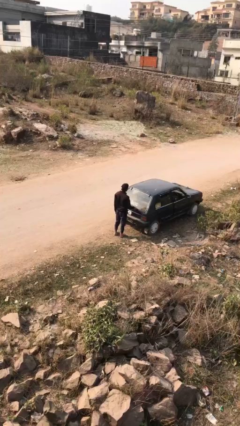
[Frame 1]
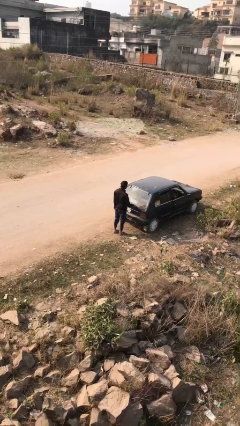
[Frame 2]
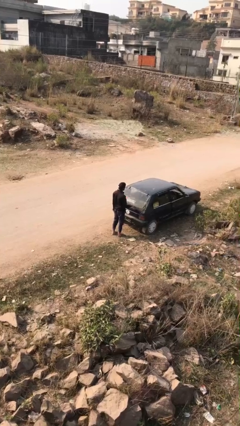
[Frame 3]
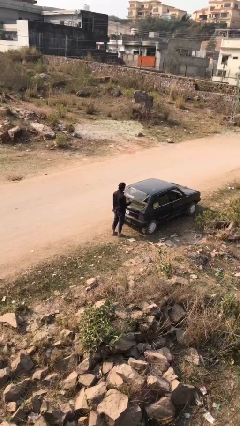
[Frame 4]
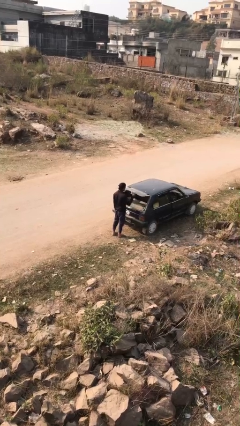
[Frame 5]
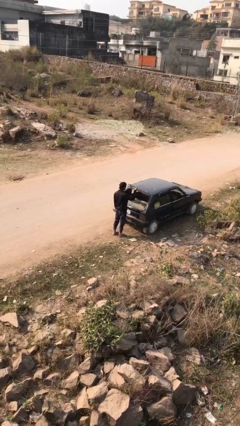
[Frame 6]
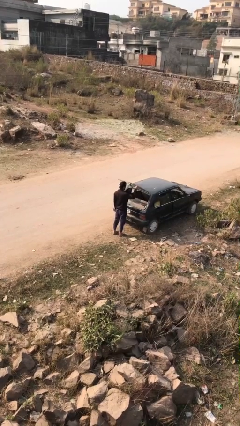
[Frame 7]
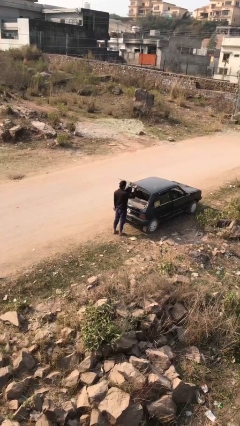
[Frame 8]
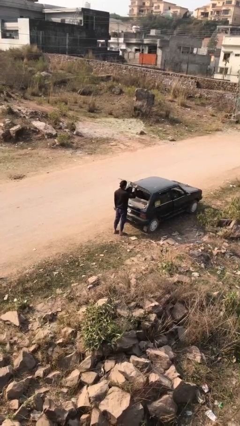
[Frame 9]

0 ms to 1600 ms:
person opens car trunk

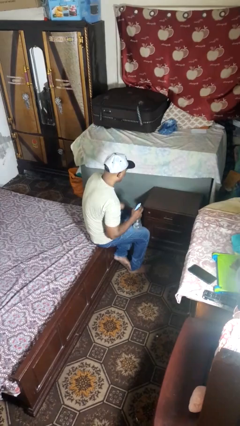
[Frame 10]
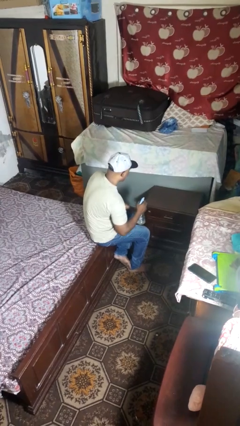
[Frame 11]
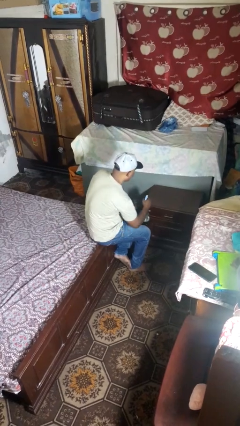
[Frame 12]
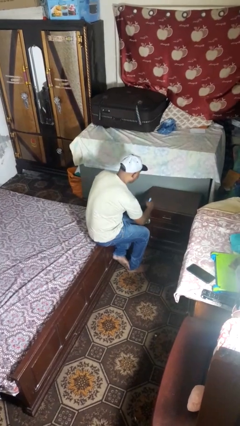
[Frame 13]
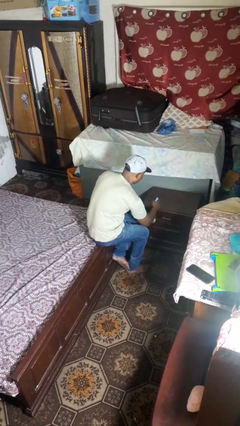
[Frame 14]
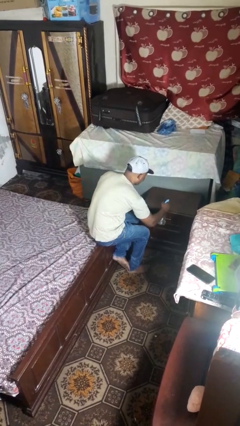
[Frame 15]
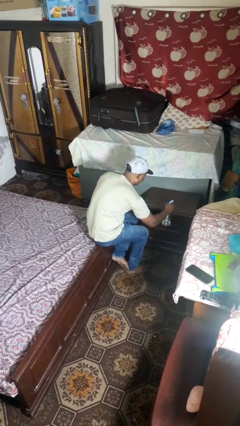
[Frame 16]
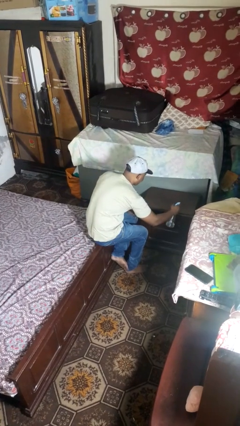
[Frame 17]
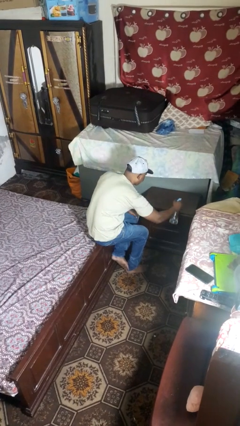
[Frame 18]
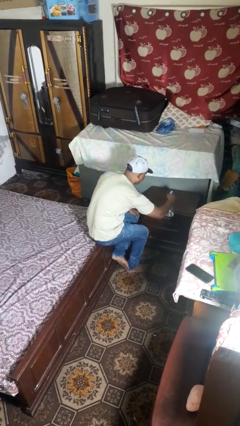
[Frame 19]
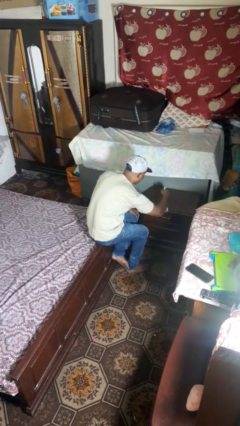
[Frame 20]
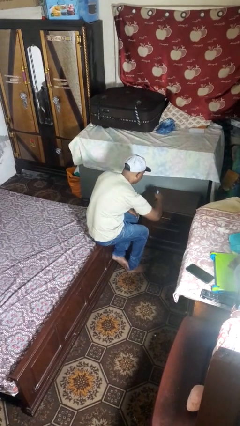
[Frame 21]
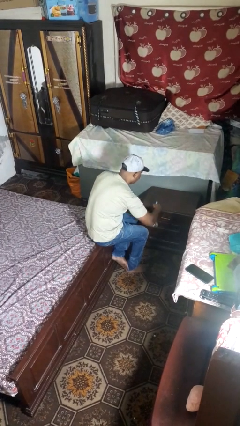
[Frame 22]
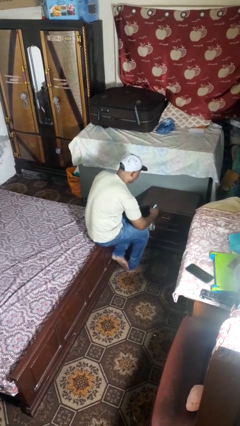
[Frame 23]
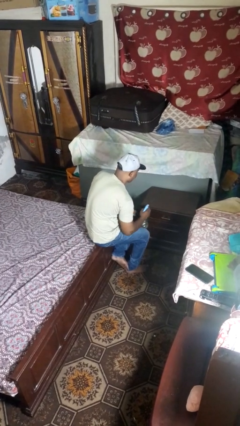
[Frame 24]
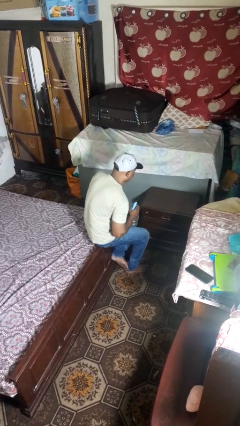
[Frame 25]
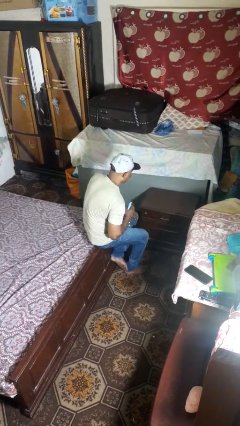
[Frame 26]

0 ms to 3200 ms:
person sprays from bottle

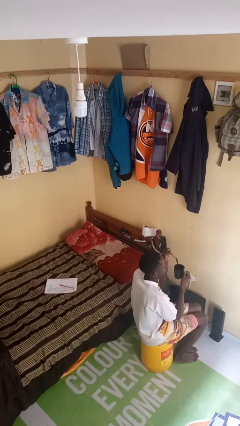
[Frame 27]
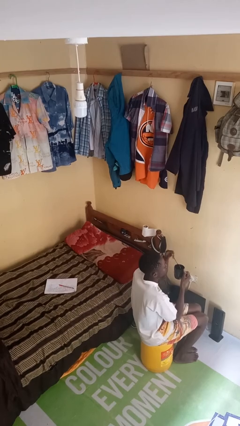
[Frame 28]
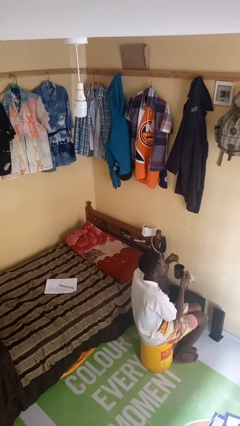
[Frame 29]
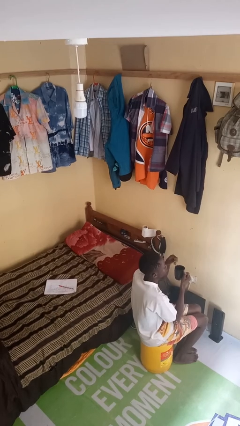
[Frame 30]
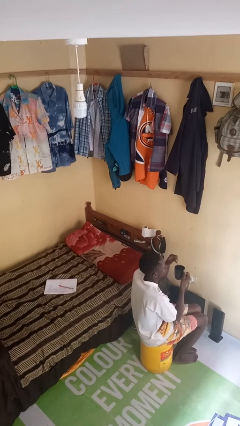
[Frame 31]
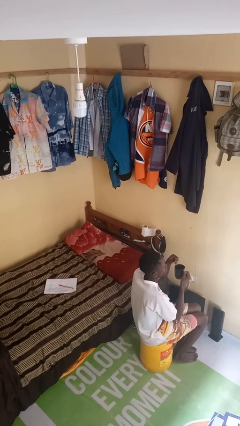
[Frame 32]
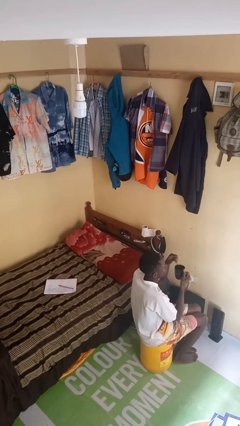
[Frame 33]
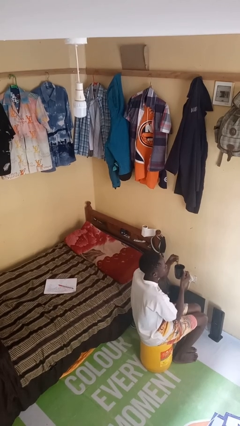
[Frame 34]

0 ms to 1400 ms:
person stirs mug

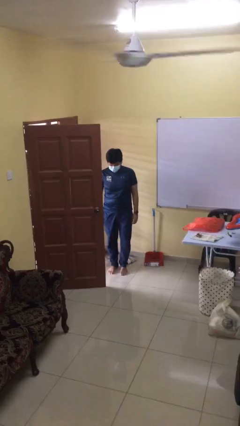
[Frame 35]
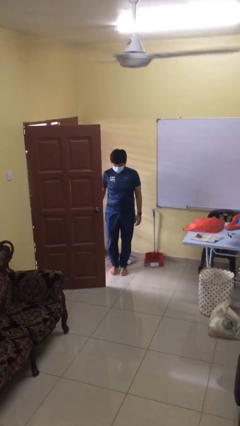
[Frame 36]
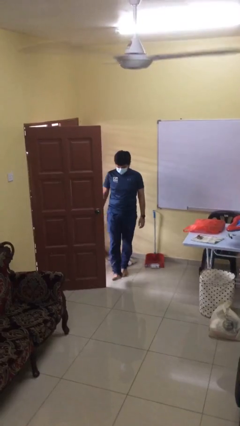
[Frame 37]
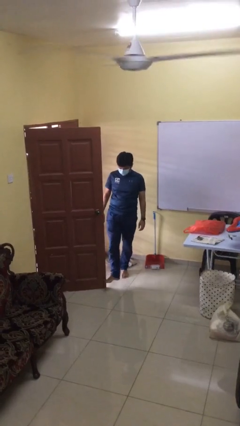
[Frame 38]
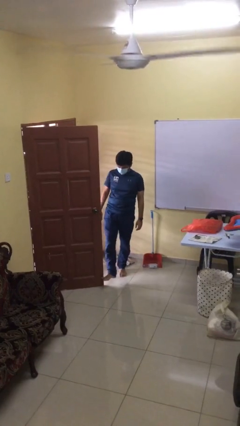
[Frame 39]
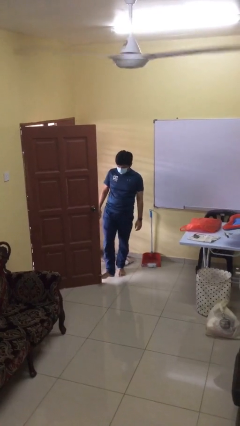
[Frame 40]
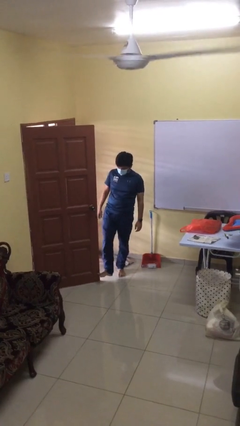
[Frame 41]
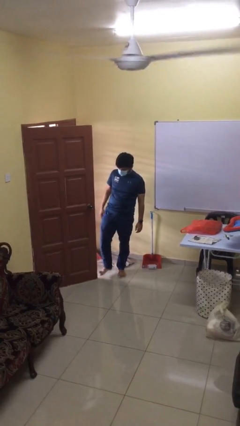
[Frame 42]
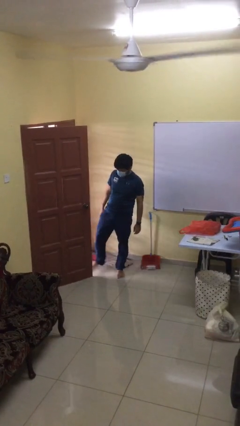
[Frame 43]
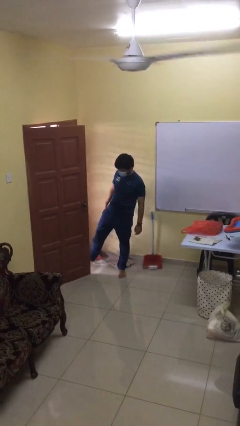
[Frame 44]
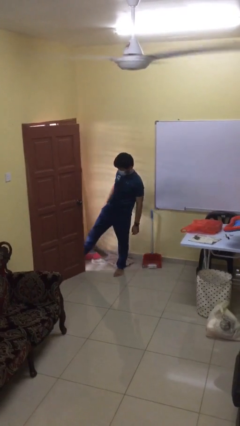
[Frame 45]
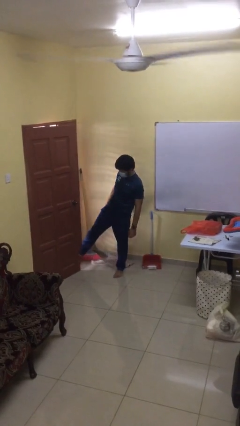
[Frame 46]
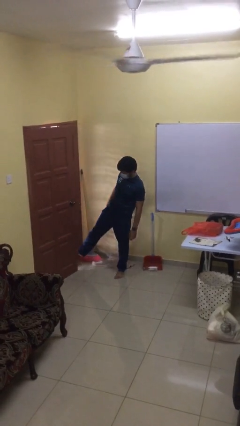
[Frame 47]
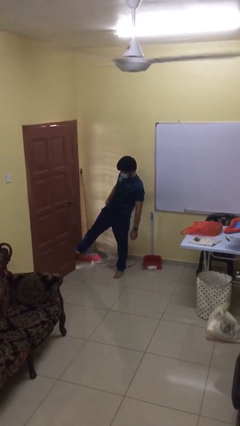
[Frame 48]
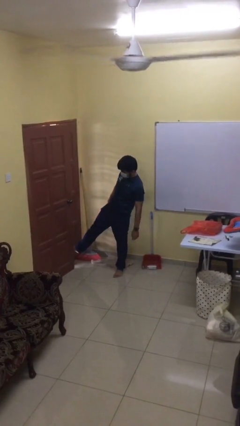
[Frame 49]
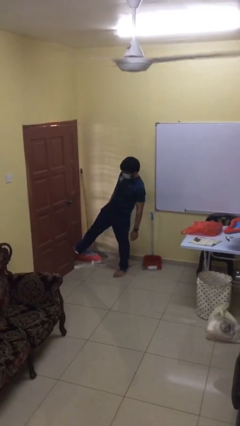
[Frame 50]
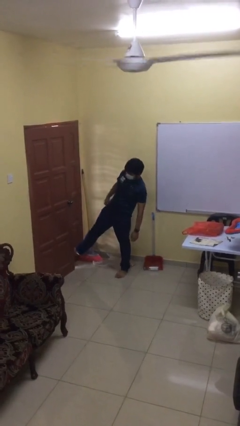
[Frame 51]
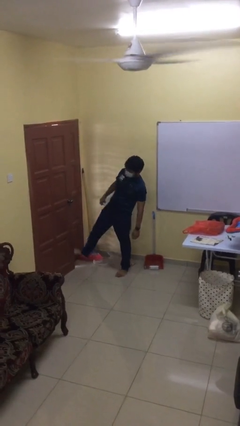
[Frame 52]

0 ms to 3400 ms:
person closes door with foot

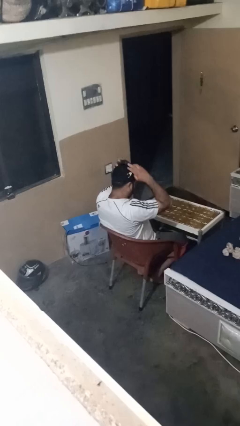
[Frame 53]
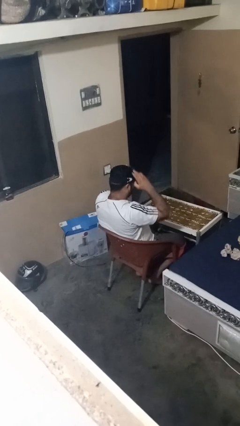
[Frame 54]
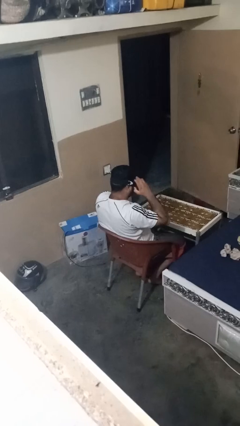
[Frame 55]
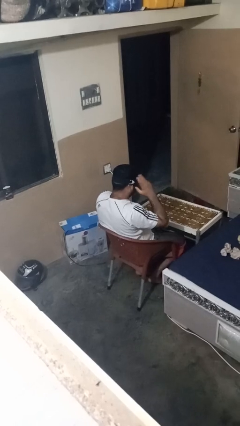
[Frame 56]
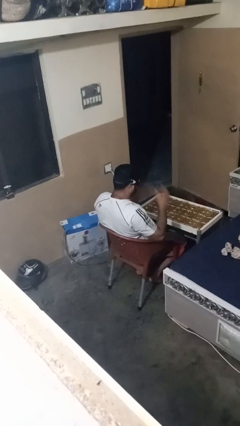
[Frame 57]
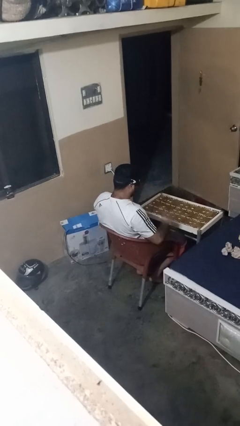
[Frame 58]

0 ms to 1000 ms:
person puts on sunglasses

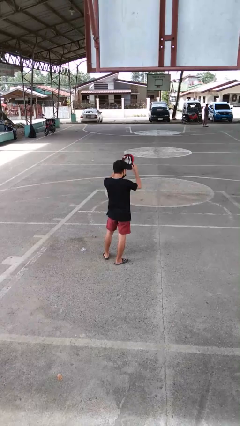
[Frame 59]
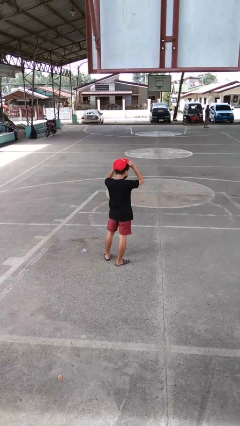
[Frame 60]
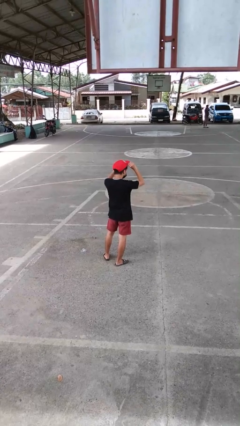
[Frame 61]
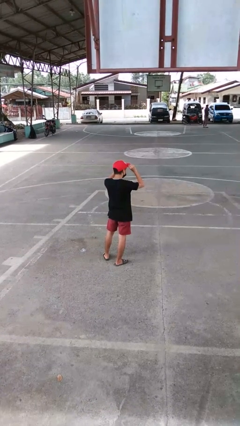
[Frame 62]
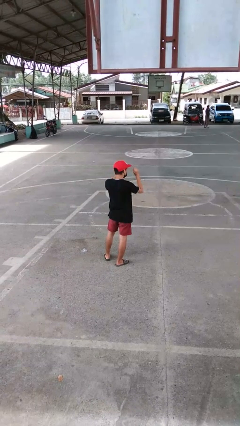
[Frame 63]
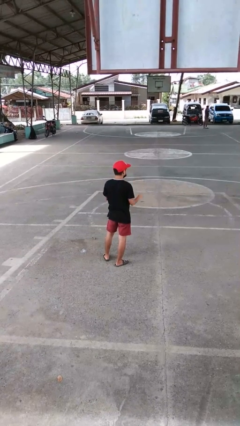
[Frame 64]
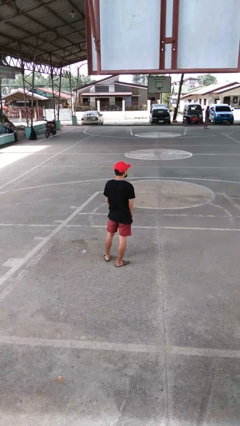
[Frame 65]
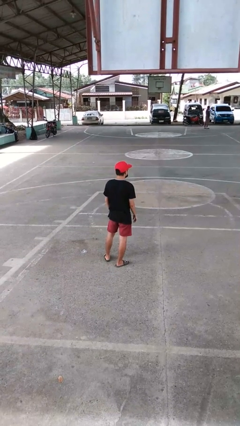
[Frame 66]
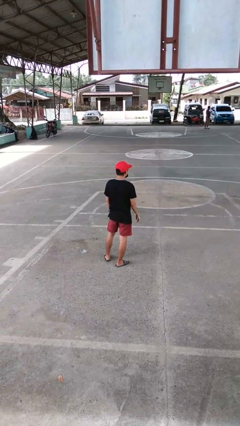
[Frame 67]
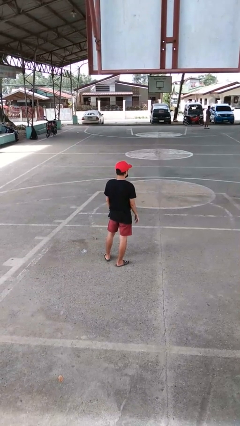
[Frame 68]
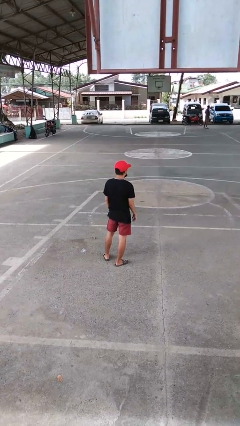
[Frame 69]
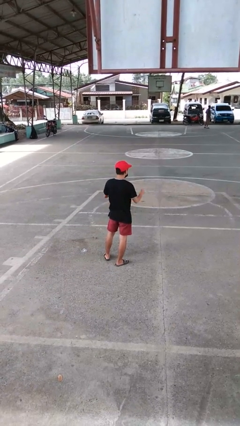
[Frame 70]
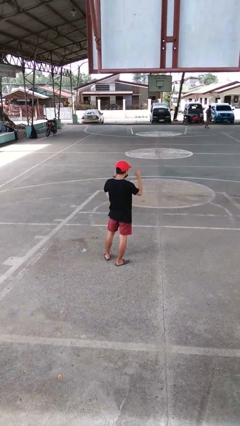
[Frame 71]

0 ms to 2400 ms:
person puts on hat

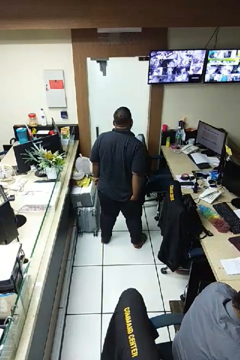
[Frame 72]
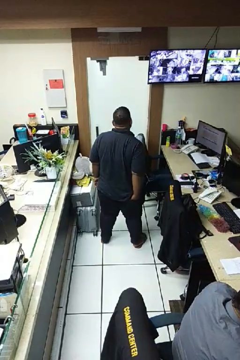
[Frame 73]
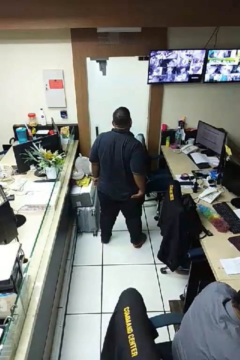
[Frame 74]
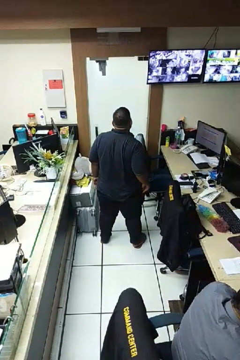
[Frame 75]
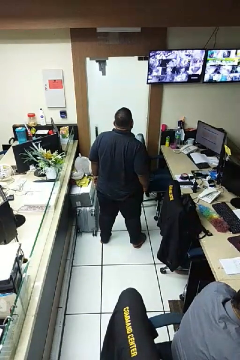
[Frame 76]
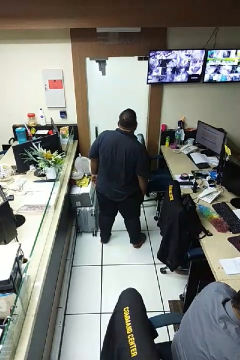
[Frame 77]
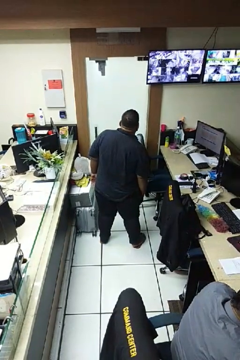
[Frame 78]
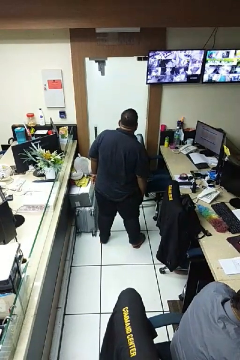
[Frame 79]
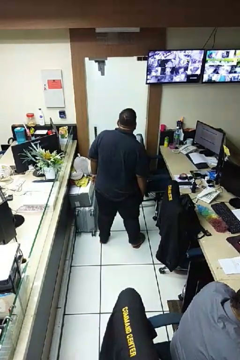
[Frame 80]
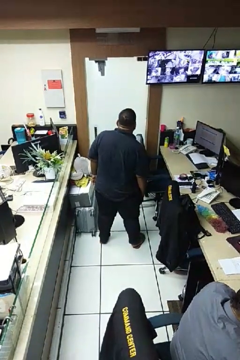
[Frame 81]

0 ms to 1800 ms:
person puts hands in back pockets

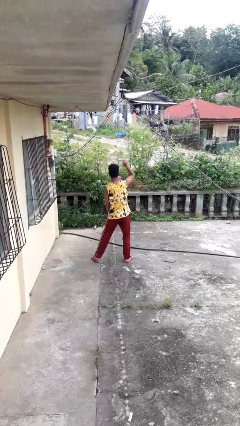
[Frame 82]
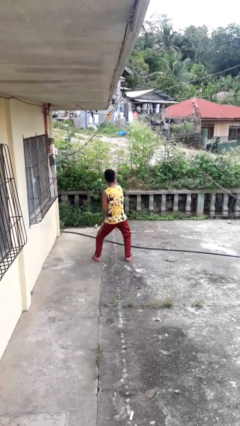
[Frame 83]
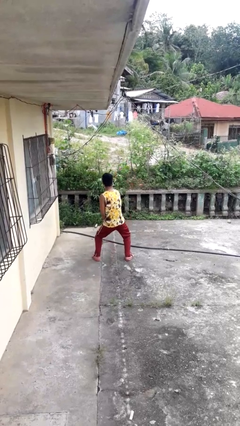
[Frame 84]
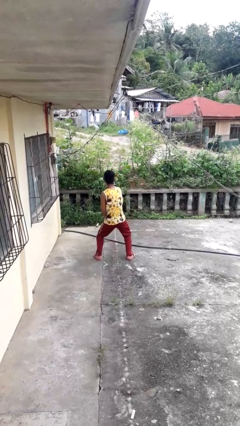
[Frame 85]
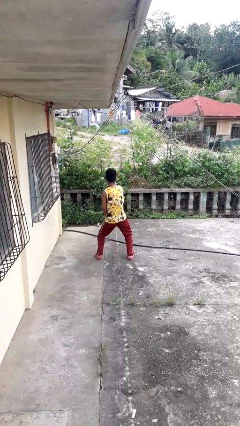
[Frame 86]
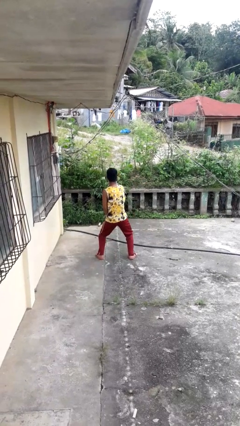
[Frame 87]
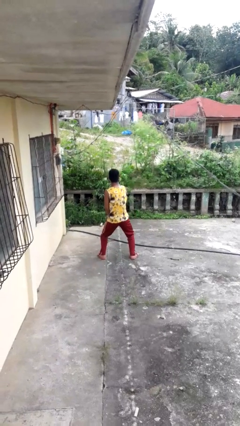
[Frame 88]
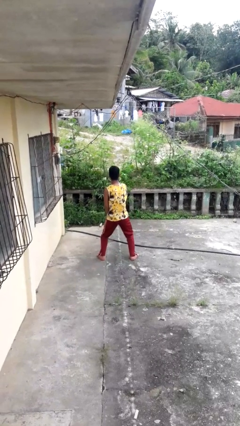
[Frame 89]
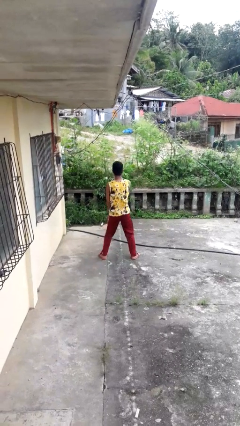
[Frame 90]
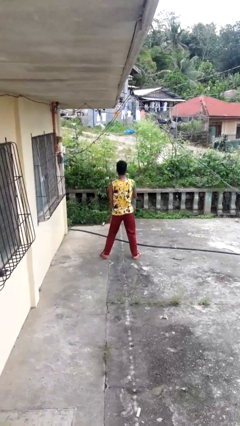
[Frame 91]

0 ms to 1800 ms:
person karate chop

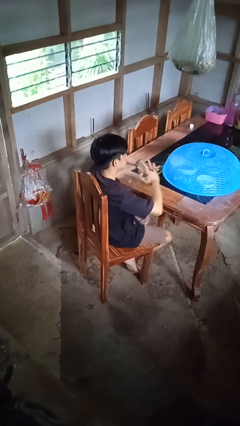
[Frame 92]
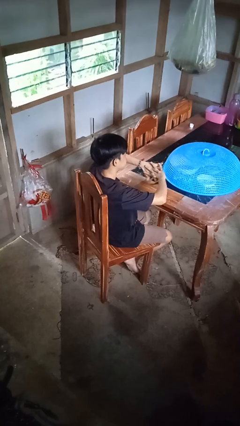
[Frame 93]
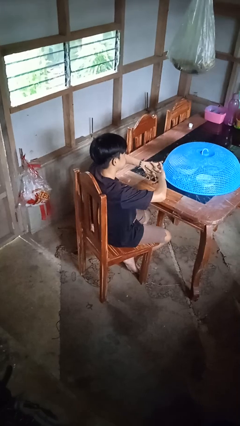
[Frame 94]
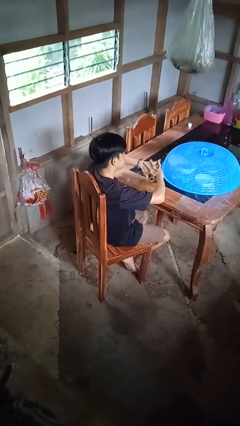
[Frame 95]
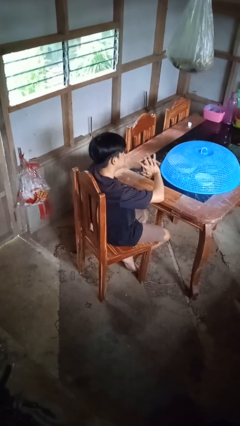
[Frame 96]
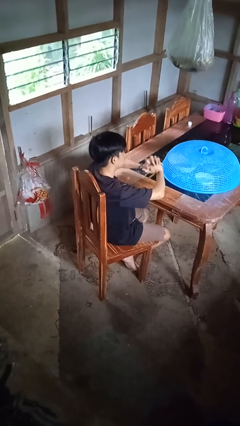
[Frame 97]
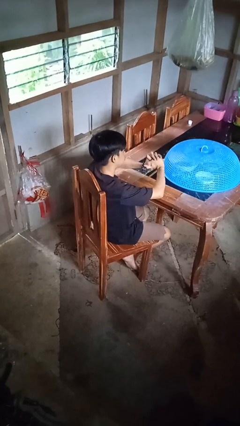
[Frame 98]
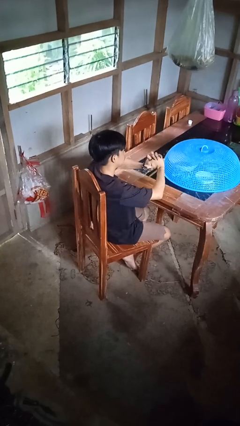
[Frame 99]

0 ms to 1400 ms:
person cracks knuckles
